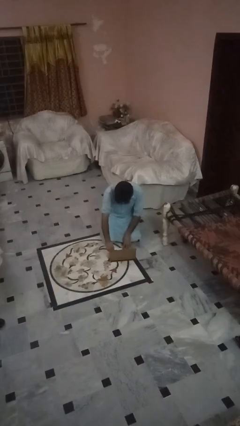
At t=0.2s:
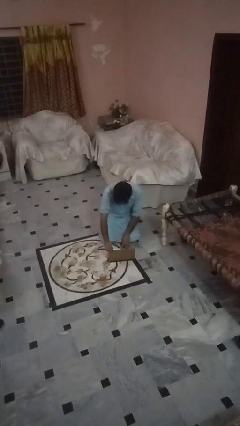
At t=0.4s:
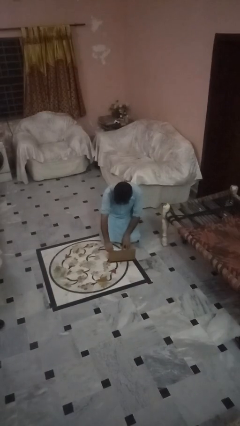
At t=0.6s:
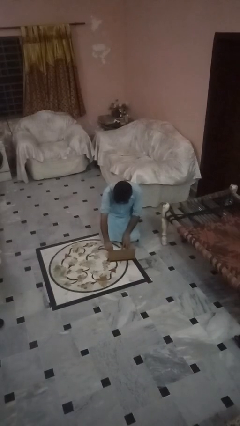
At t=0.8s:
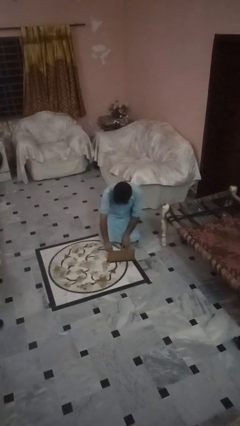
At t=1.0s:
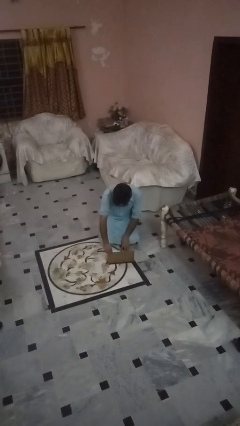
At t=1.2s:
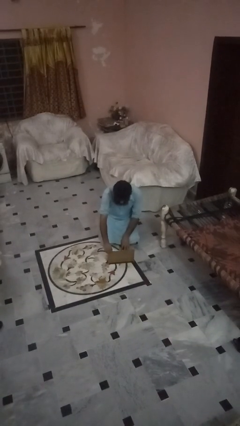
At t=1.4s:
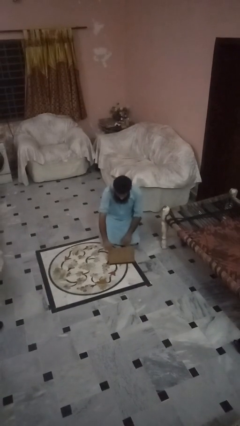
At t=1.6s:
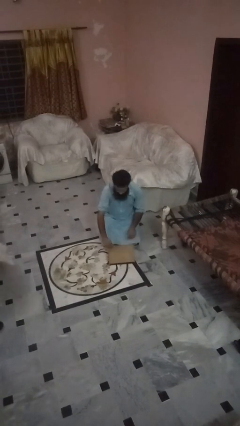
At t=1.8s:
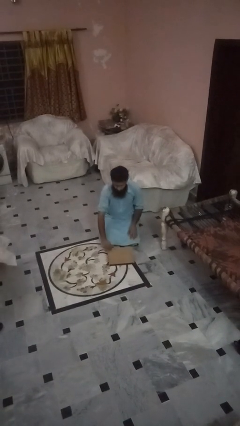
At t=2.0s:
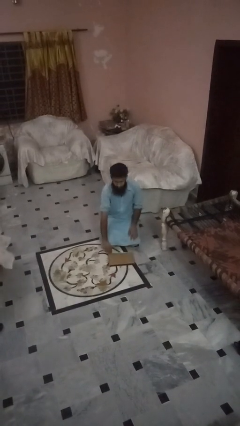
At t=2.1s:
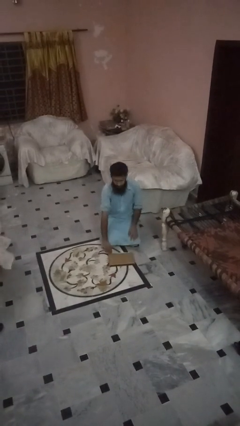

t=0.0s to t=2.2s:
person closes laptop

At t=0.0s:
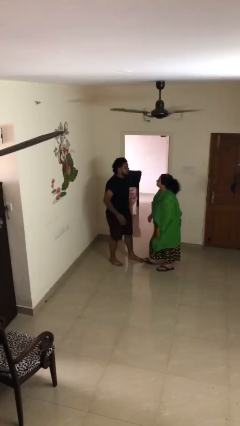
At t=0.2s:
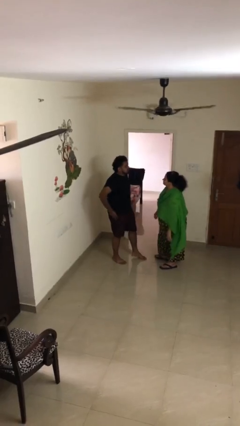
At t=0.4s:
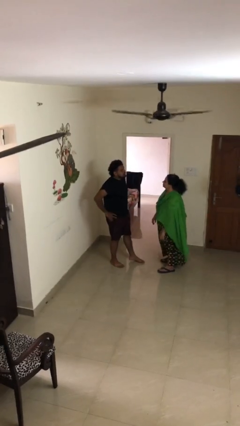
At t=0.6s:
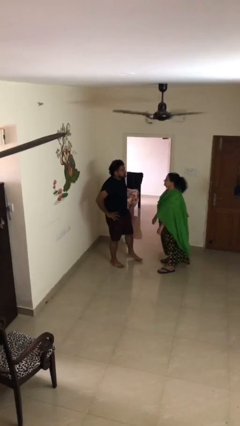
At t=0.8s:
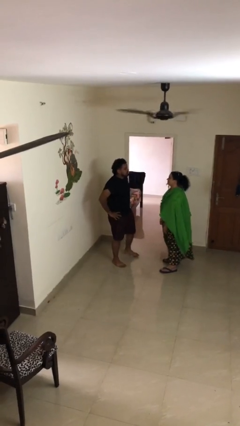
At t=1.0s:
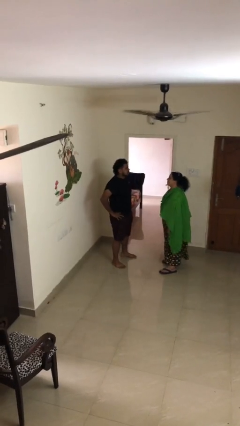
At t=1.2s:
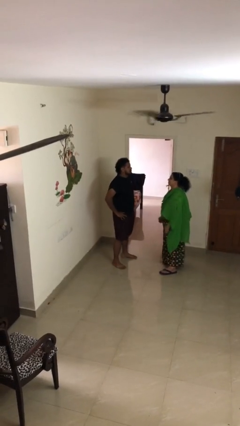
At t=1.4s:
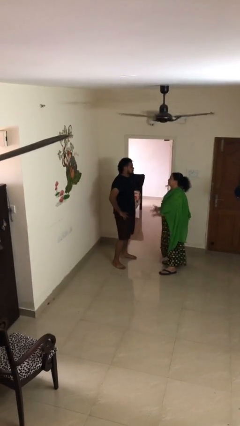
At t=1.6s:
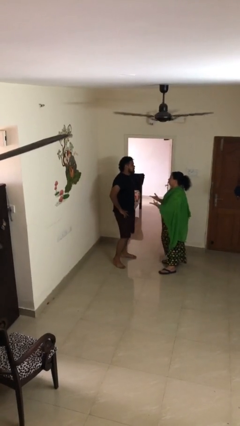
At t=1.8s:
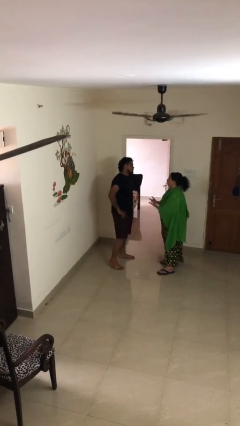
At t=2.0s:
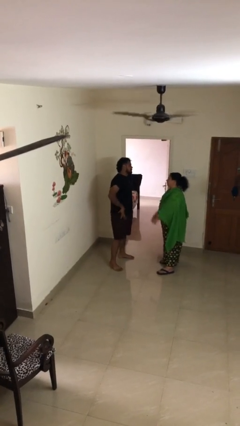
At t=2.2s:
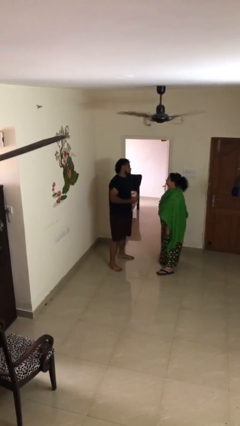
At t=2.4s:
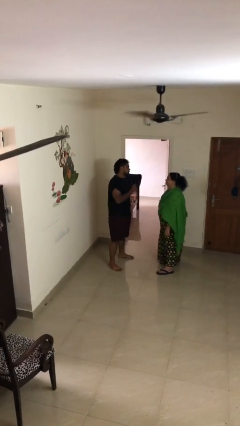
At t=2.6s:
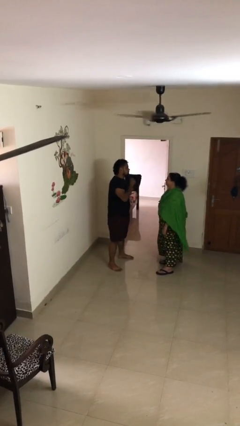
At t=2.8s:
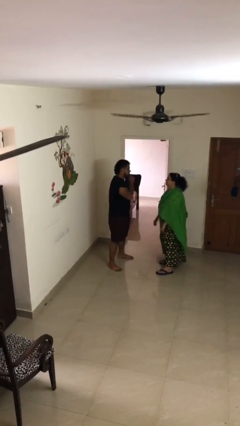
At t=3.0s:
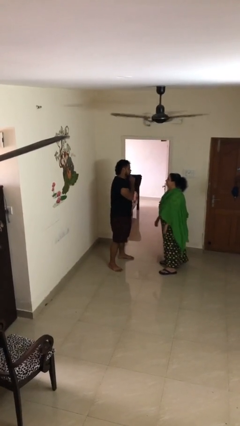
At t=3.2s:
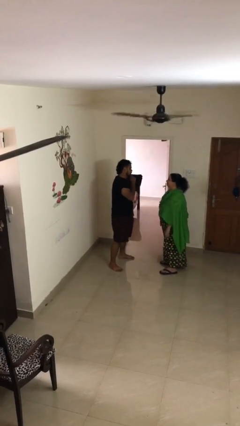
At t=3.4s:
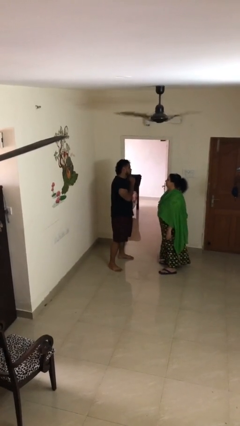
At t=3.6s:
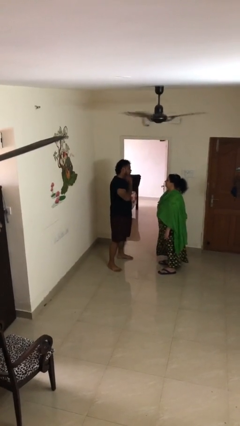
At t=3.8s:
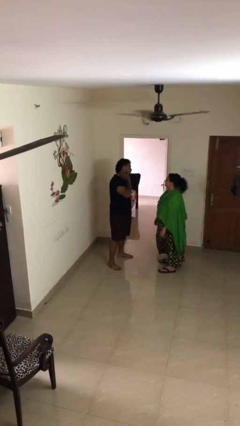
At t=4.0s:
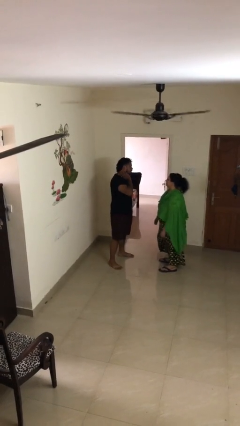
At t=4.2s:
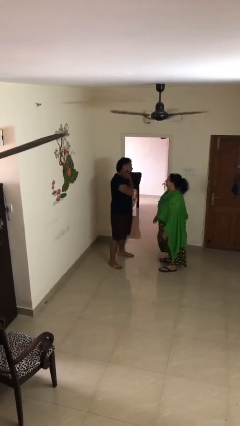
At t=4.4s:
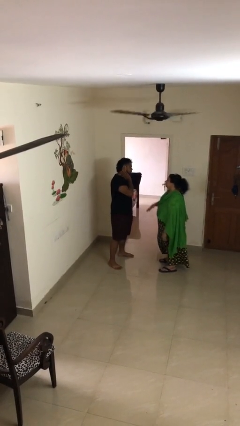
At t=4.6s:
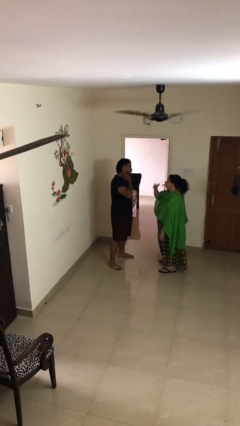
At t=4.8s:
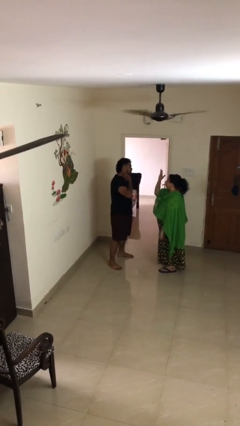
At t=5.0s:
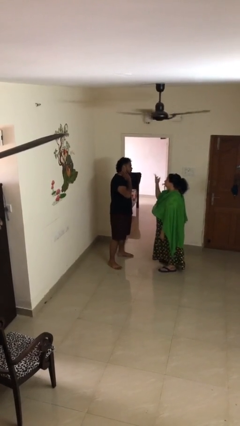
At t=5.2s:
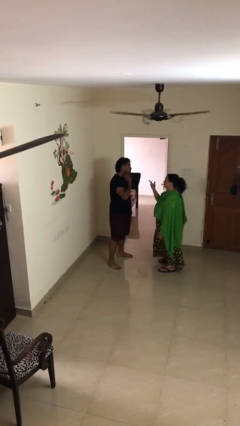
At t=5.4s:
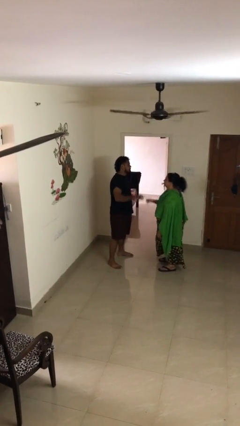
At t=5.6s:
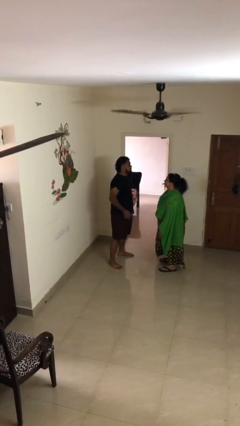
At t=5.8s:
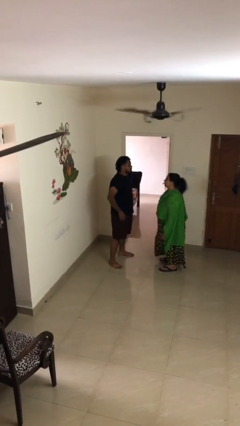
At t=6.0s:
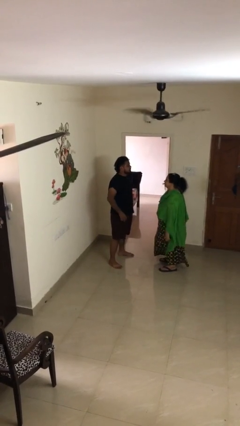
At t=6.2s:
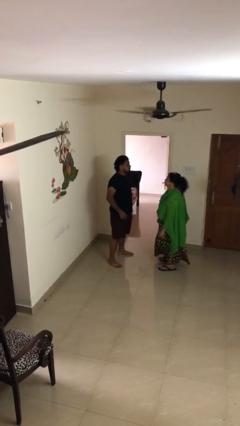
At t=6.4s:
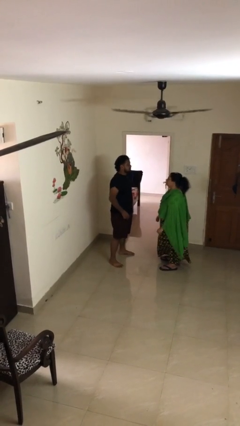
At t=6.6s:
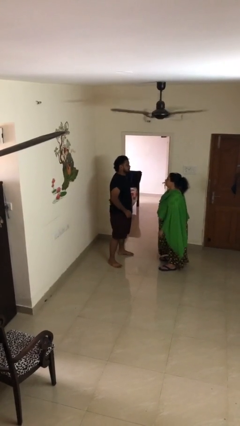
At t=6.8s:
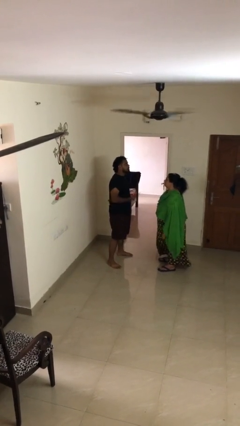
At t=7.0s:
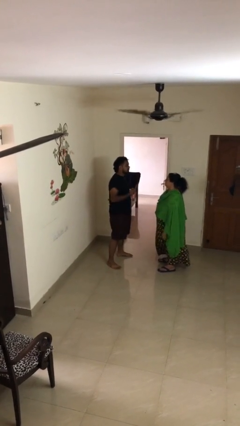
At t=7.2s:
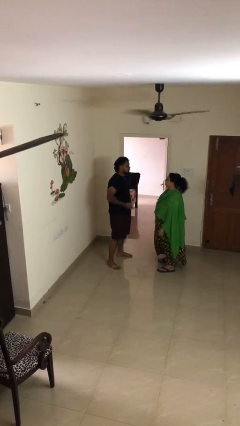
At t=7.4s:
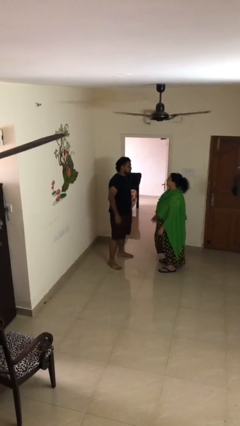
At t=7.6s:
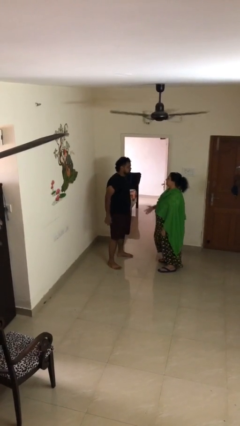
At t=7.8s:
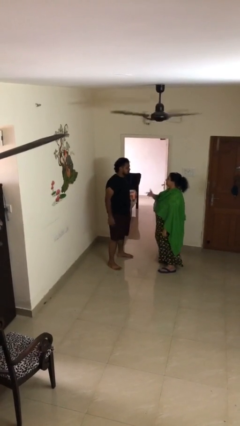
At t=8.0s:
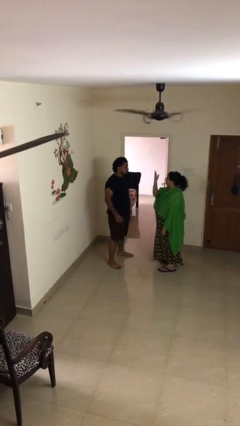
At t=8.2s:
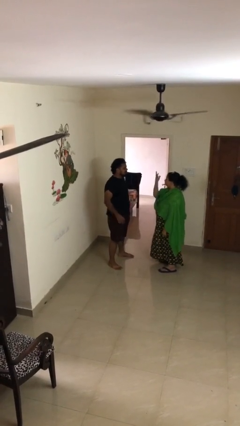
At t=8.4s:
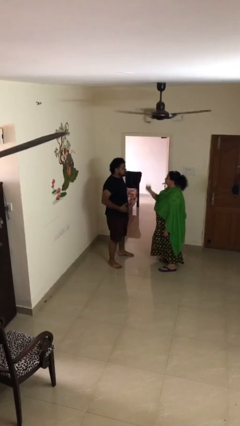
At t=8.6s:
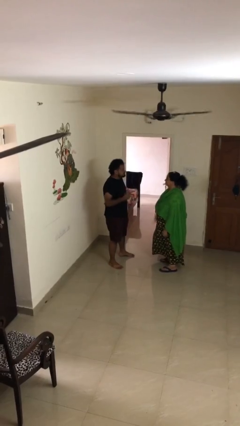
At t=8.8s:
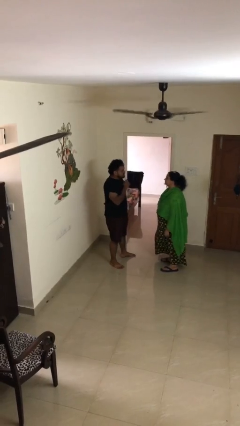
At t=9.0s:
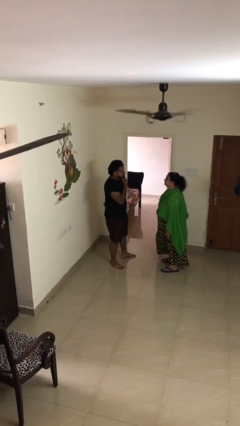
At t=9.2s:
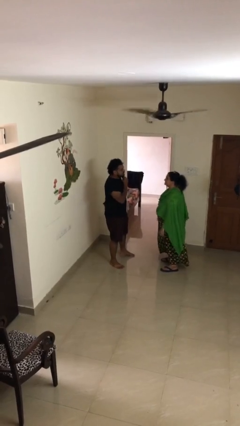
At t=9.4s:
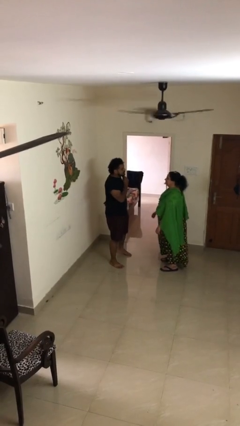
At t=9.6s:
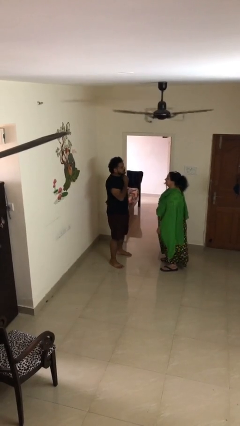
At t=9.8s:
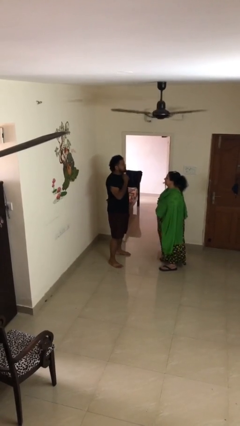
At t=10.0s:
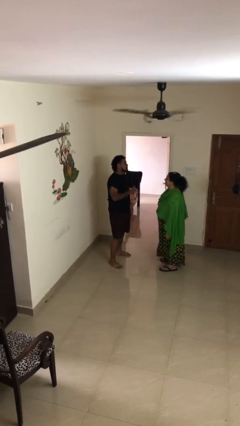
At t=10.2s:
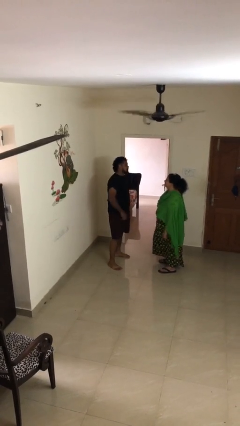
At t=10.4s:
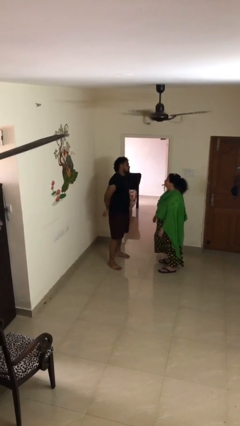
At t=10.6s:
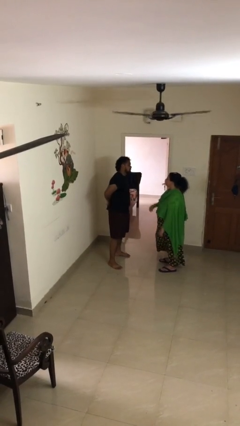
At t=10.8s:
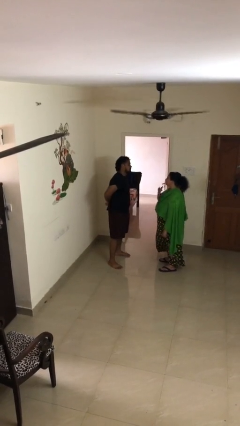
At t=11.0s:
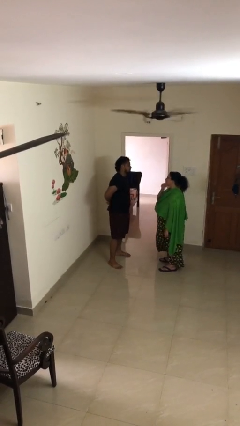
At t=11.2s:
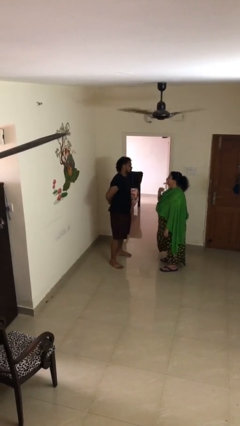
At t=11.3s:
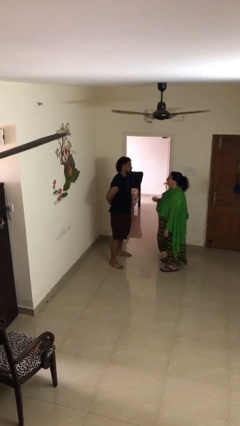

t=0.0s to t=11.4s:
person talks to person

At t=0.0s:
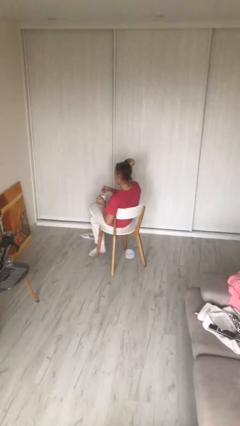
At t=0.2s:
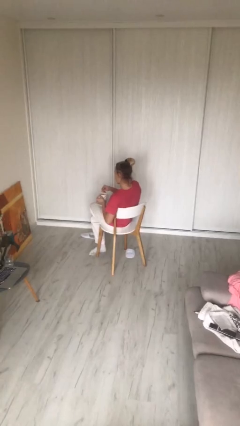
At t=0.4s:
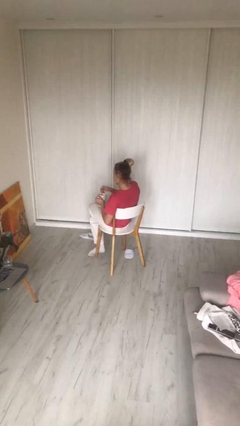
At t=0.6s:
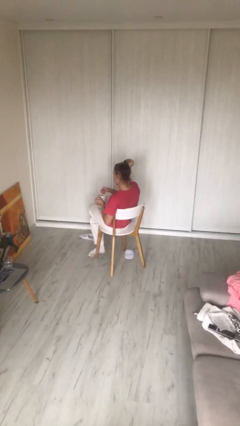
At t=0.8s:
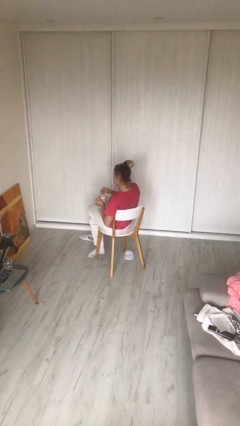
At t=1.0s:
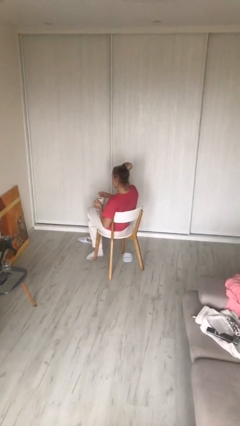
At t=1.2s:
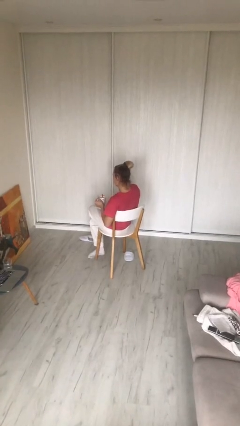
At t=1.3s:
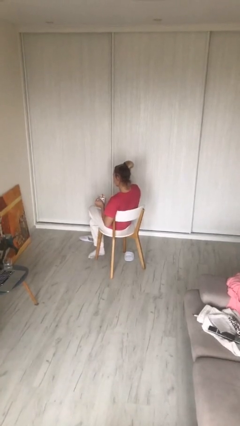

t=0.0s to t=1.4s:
person stirs mug

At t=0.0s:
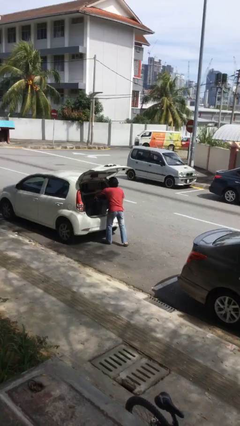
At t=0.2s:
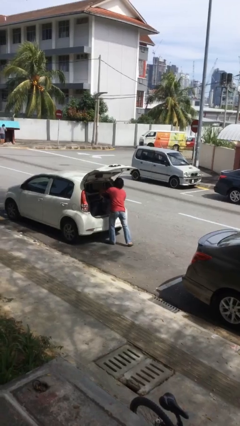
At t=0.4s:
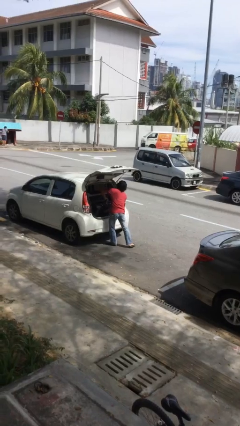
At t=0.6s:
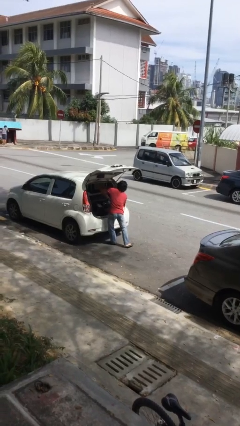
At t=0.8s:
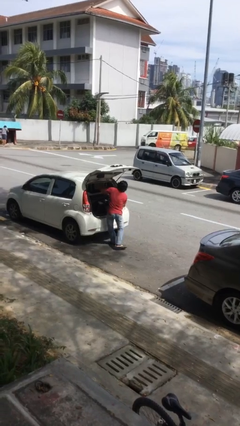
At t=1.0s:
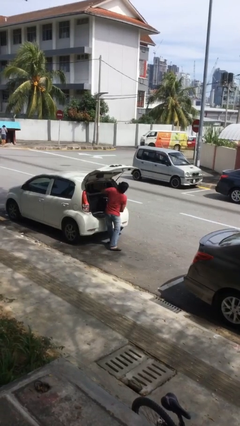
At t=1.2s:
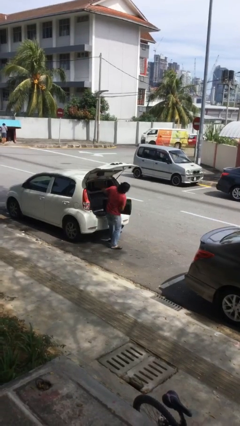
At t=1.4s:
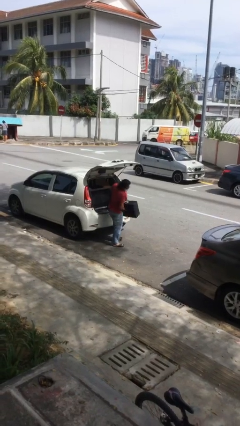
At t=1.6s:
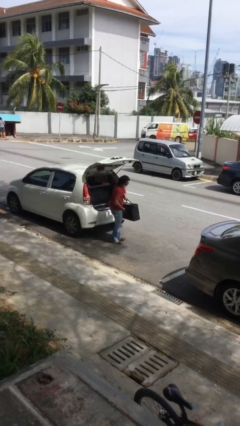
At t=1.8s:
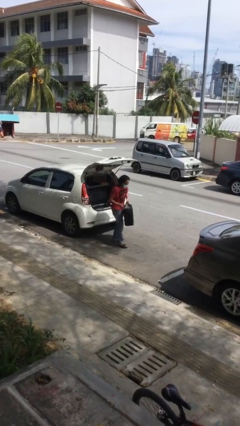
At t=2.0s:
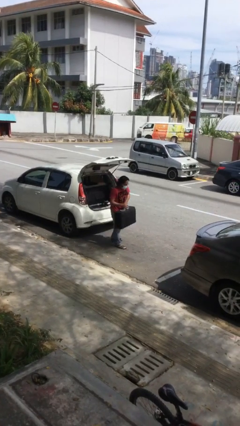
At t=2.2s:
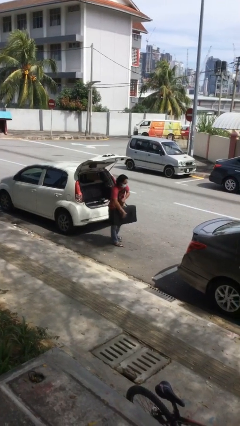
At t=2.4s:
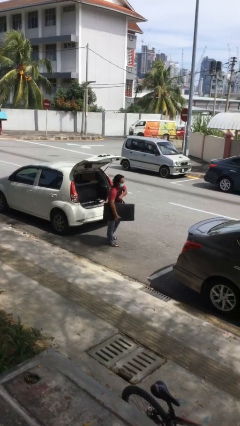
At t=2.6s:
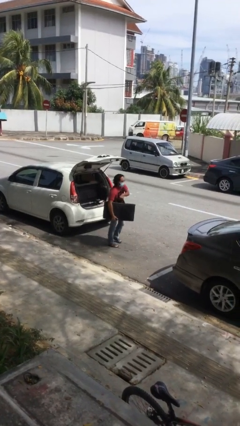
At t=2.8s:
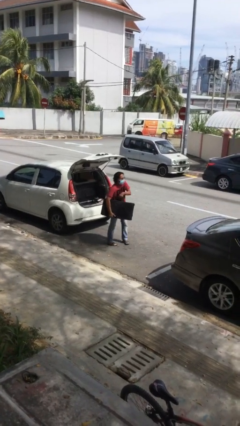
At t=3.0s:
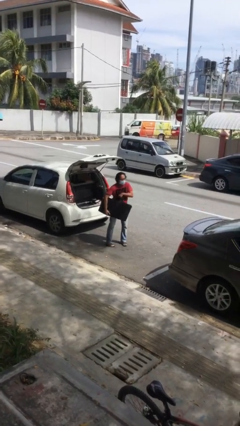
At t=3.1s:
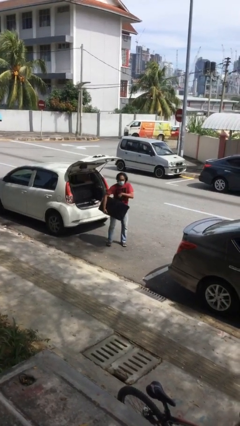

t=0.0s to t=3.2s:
person unloads car
